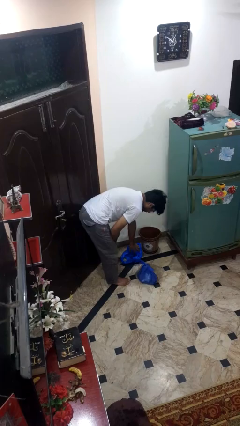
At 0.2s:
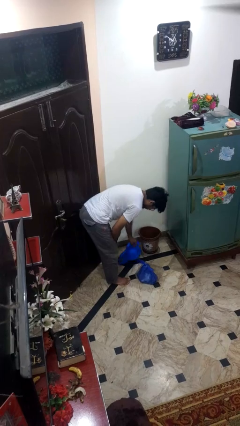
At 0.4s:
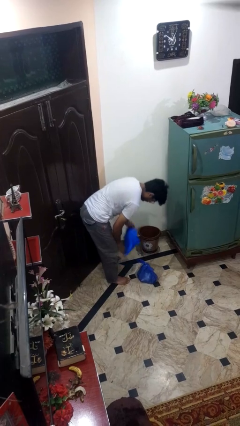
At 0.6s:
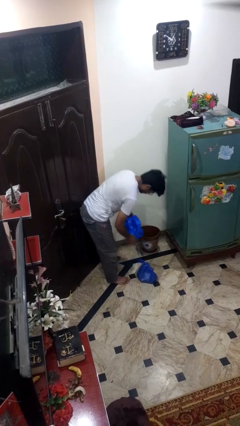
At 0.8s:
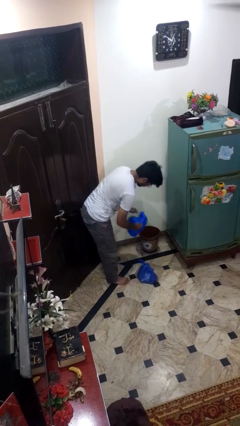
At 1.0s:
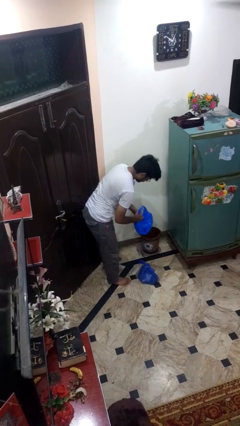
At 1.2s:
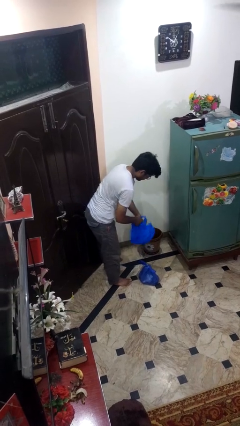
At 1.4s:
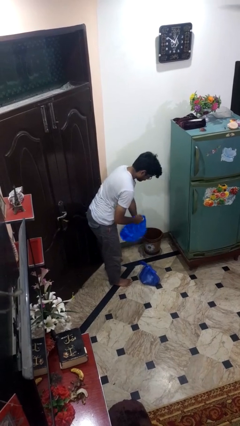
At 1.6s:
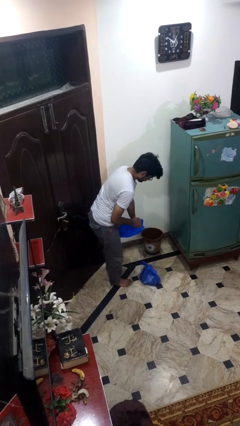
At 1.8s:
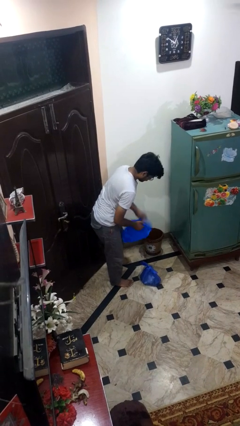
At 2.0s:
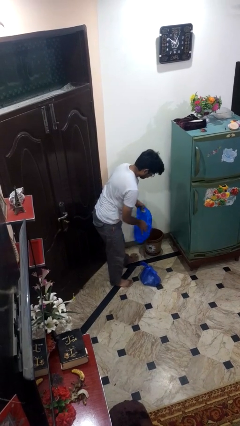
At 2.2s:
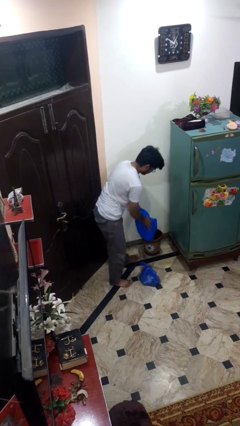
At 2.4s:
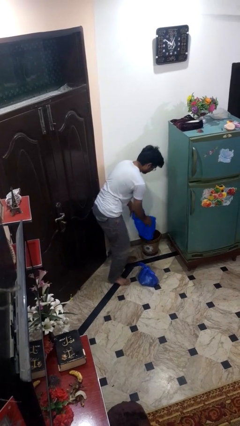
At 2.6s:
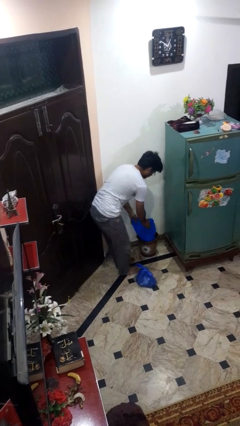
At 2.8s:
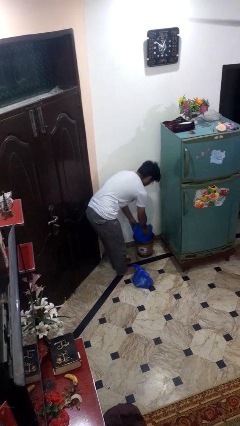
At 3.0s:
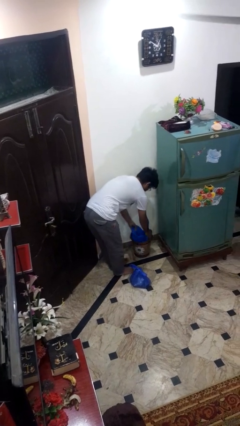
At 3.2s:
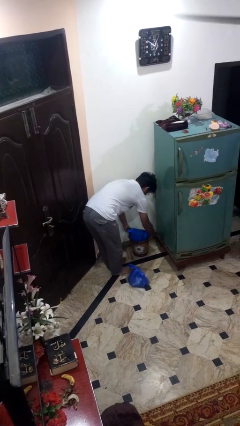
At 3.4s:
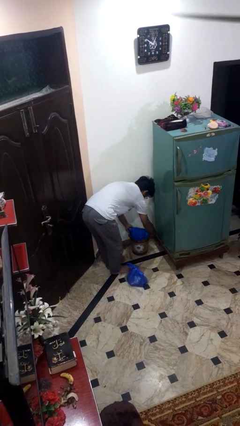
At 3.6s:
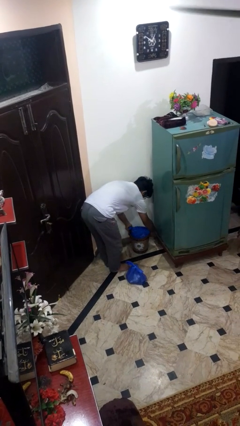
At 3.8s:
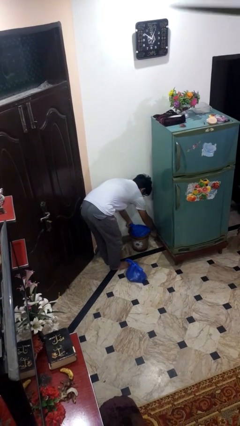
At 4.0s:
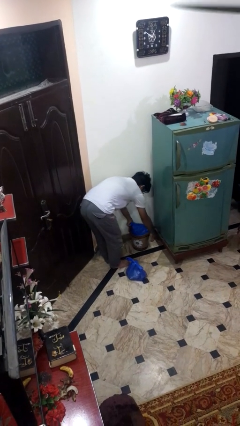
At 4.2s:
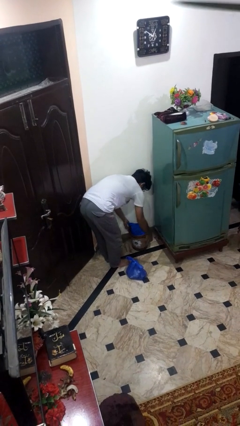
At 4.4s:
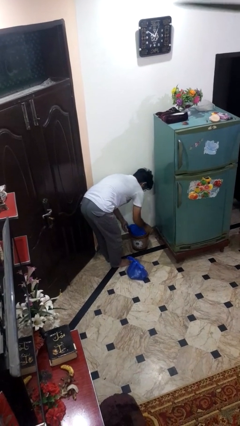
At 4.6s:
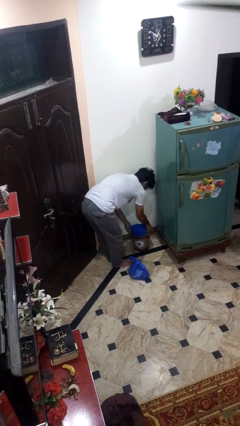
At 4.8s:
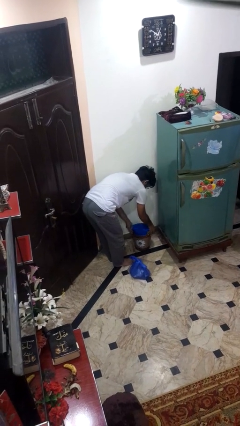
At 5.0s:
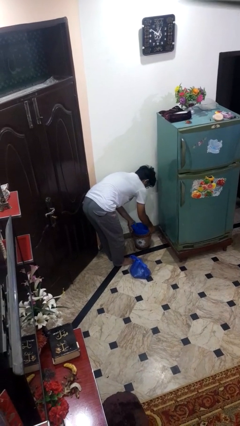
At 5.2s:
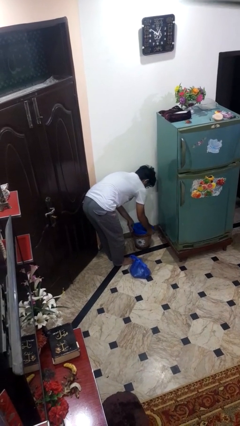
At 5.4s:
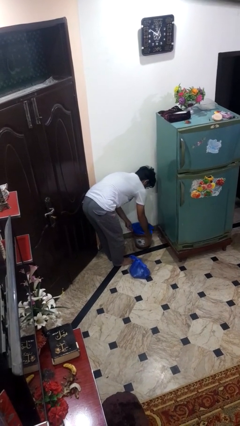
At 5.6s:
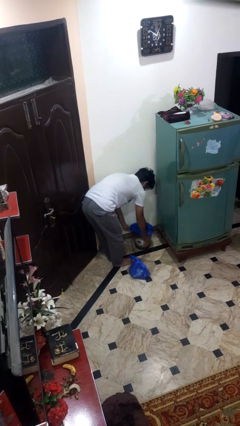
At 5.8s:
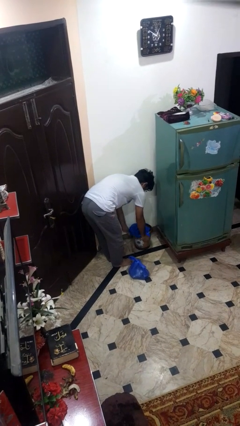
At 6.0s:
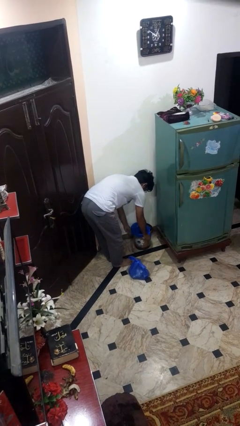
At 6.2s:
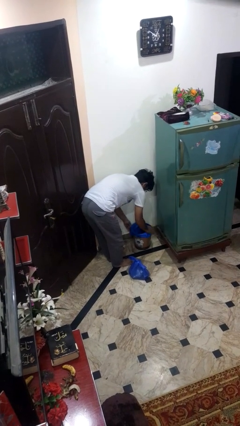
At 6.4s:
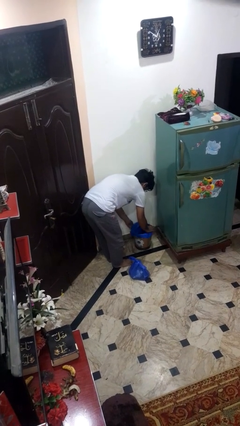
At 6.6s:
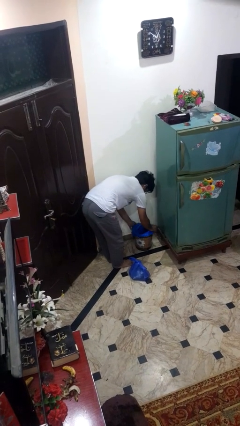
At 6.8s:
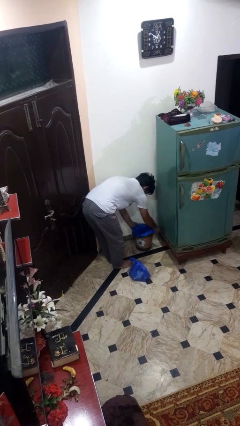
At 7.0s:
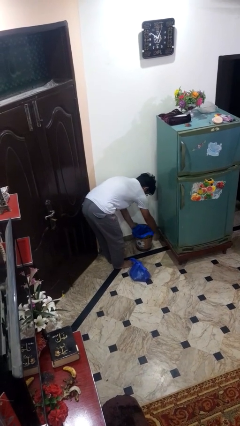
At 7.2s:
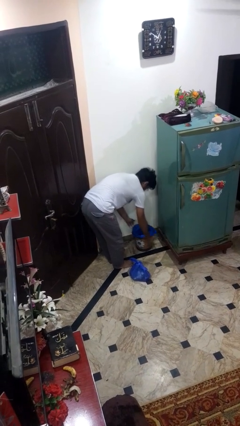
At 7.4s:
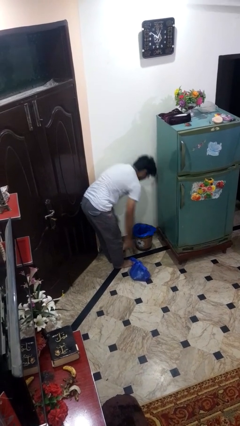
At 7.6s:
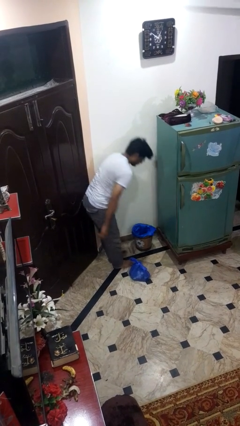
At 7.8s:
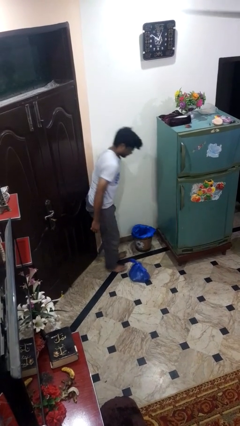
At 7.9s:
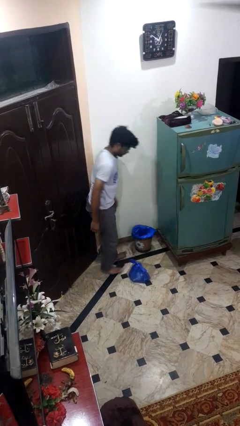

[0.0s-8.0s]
person inserts trashbag into trashcan

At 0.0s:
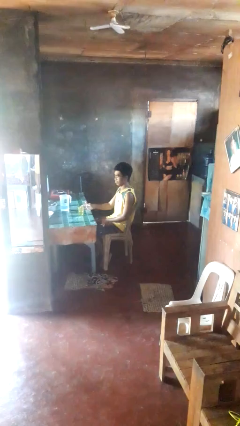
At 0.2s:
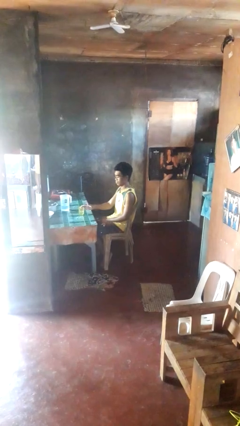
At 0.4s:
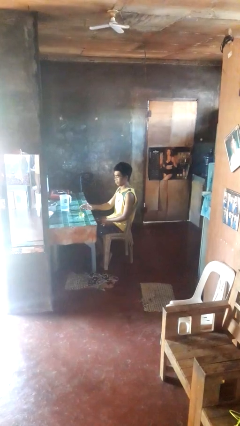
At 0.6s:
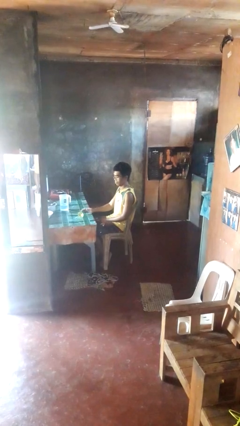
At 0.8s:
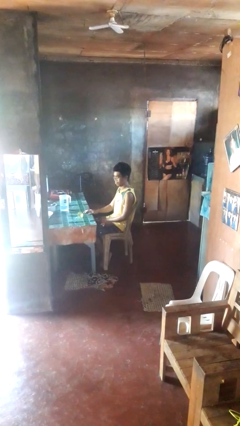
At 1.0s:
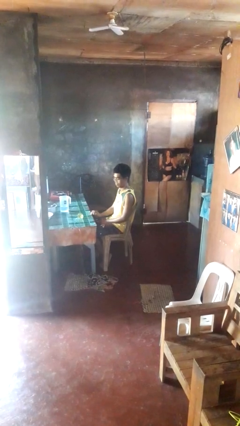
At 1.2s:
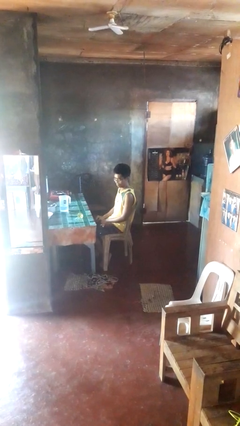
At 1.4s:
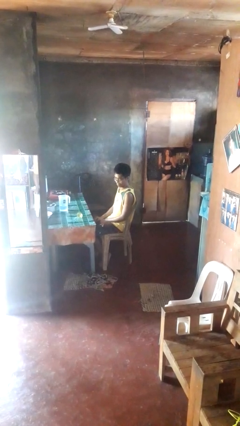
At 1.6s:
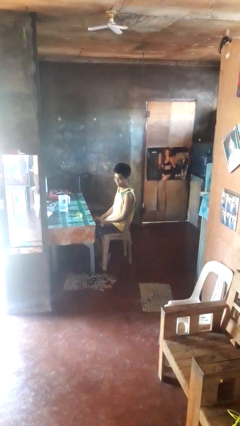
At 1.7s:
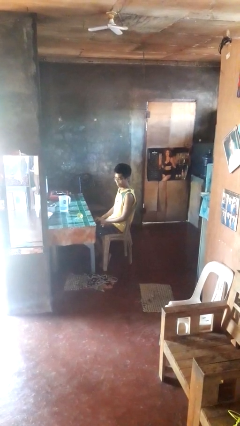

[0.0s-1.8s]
person spills on table

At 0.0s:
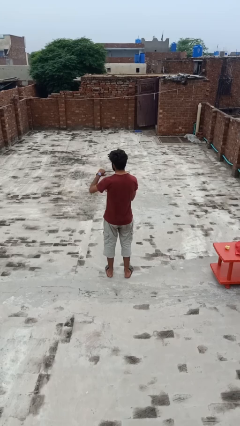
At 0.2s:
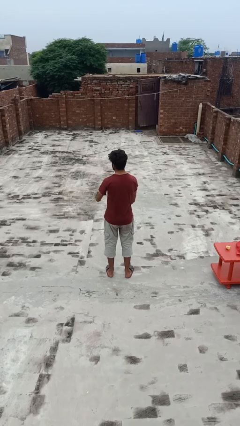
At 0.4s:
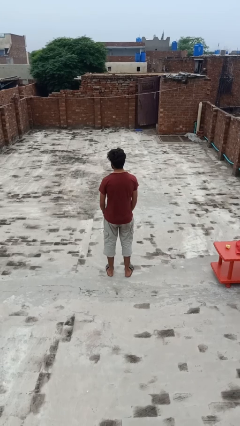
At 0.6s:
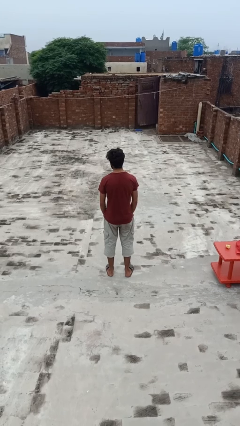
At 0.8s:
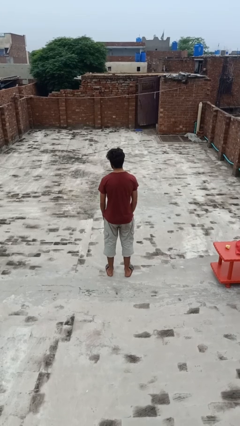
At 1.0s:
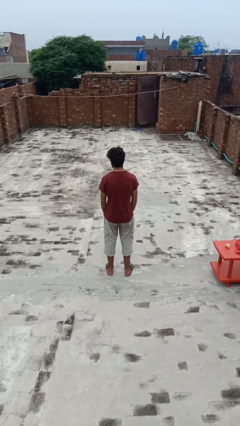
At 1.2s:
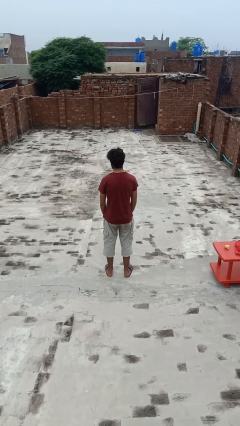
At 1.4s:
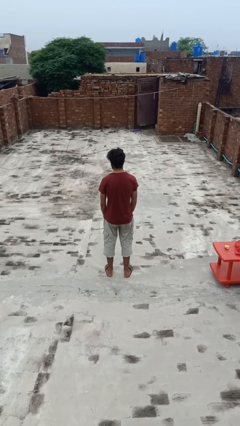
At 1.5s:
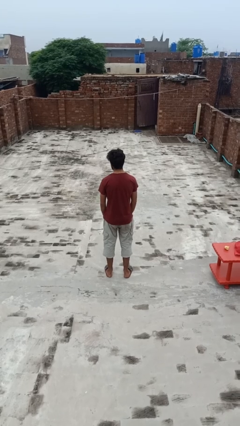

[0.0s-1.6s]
person gestures watch closely

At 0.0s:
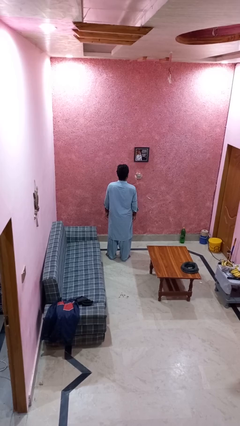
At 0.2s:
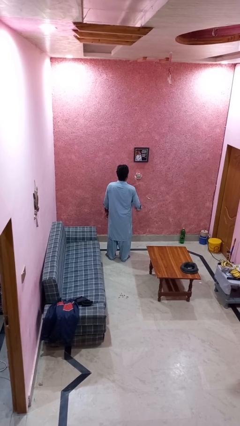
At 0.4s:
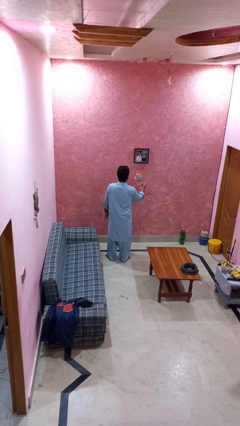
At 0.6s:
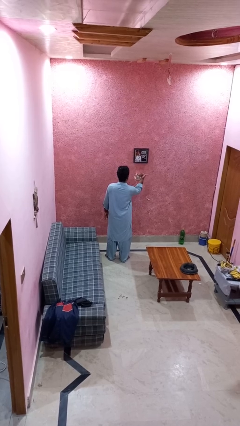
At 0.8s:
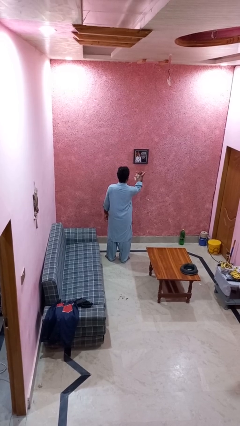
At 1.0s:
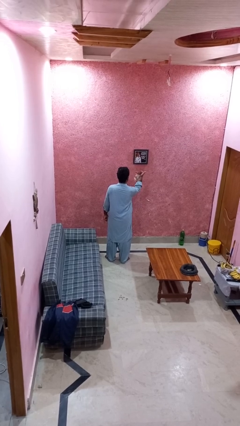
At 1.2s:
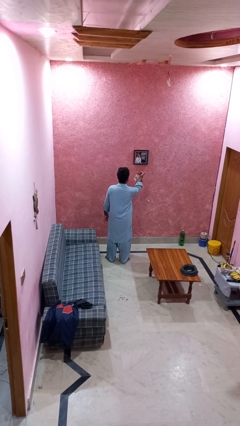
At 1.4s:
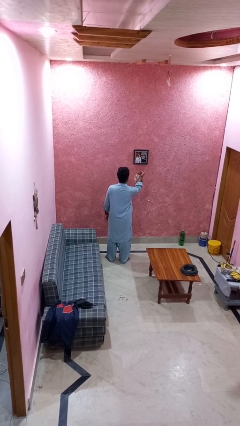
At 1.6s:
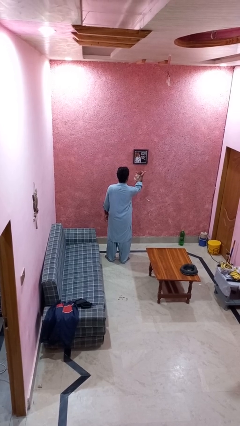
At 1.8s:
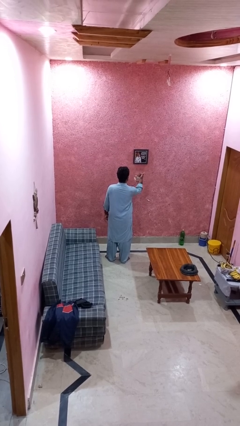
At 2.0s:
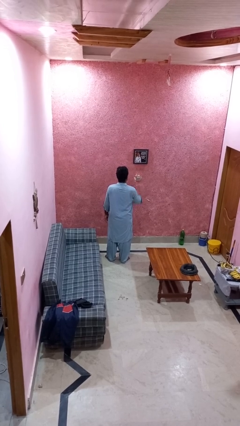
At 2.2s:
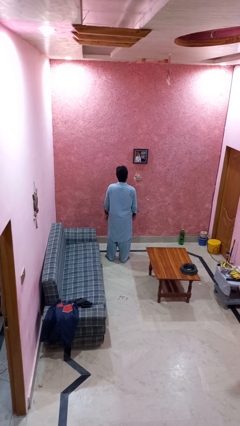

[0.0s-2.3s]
person gestures hang loose

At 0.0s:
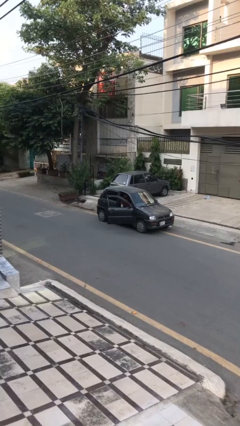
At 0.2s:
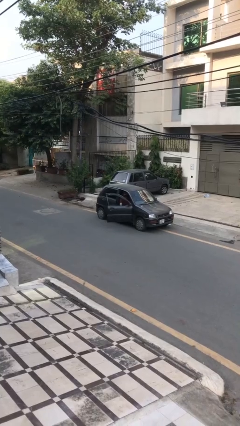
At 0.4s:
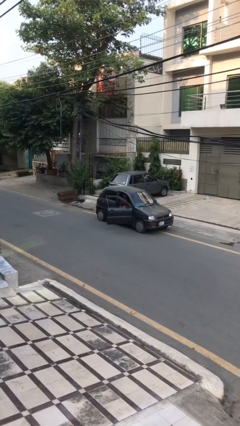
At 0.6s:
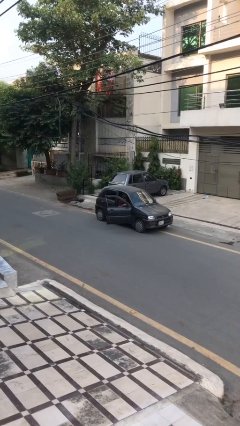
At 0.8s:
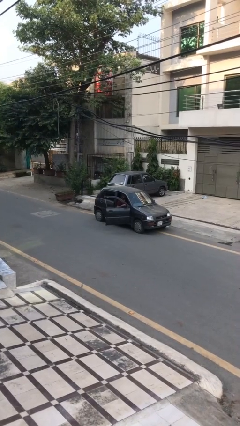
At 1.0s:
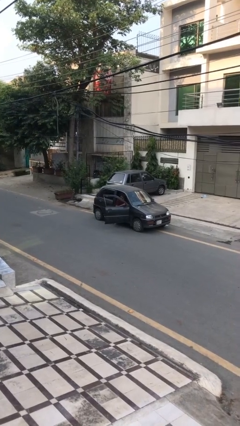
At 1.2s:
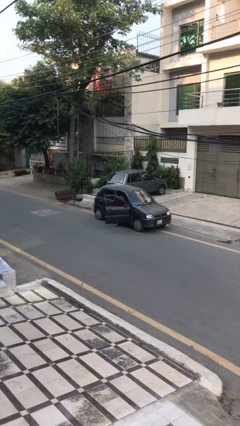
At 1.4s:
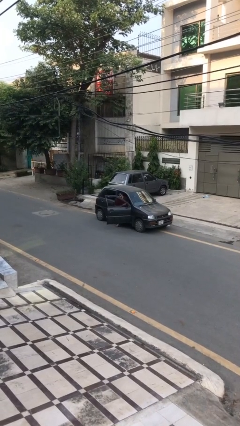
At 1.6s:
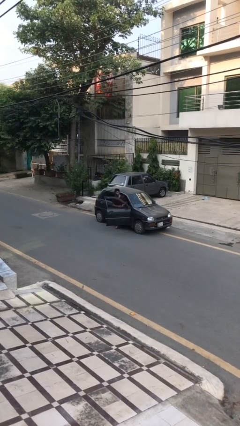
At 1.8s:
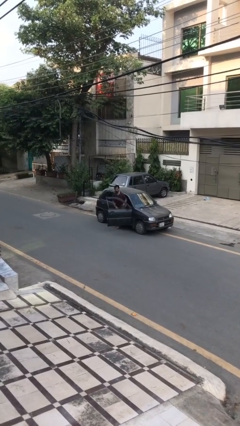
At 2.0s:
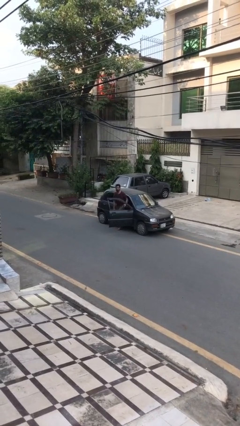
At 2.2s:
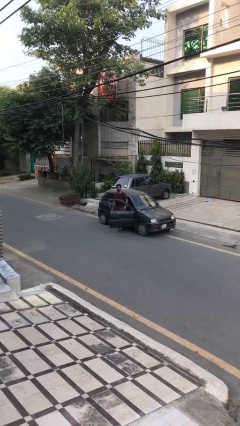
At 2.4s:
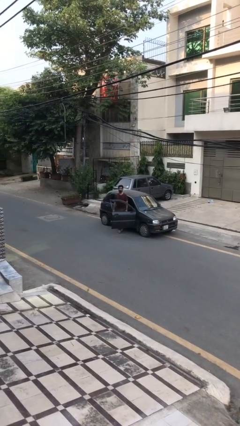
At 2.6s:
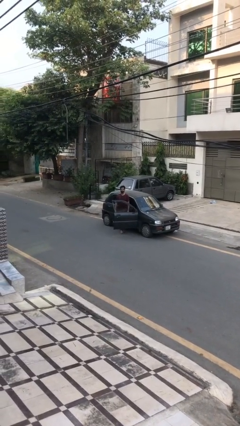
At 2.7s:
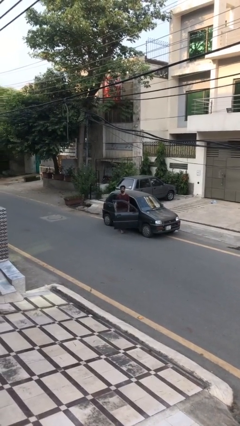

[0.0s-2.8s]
person exits car

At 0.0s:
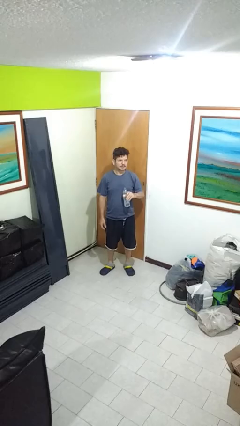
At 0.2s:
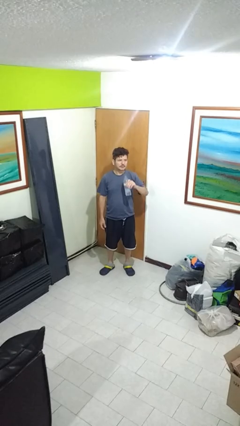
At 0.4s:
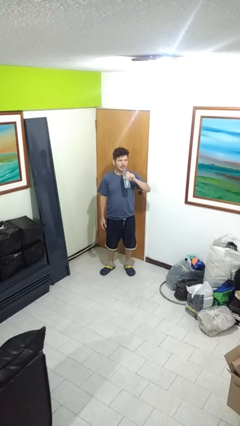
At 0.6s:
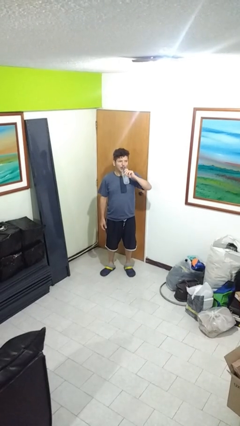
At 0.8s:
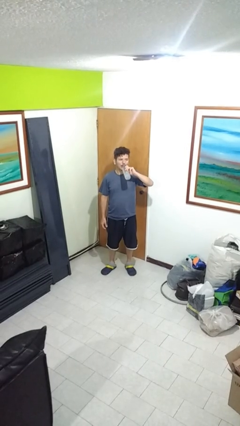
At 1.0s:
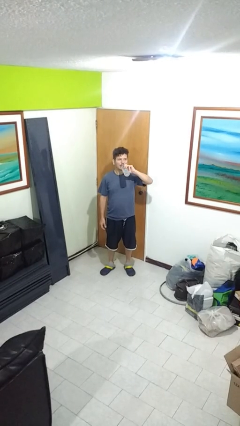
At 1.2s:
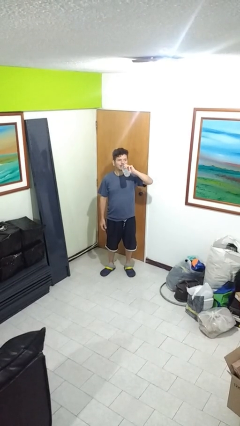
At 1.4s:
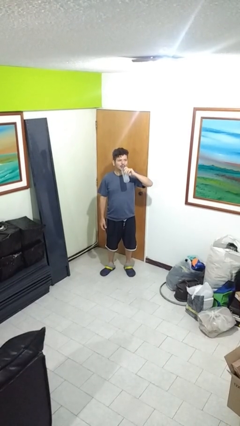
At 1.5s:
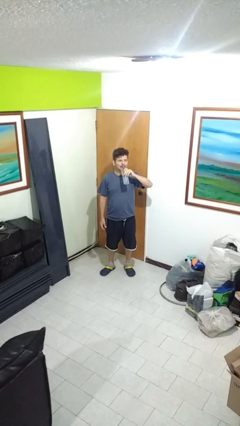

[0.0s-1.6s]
person drinks from bottle
